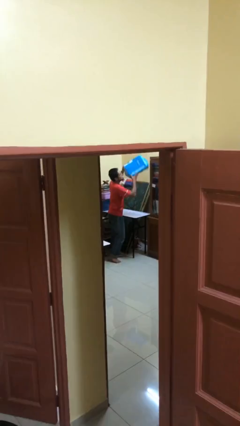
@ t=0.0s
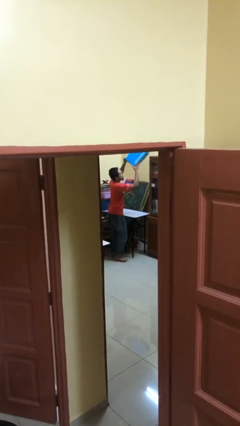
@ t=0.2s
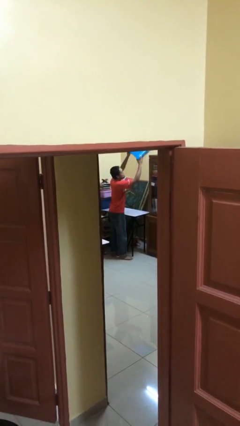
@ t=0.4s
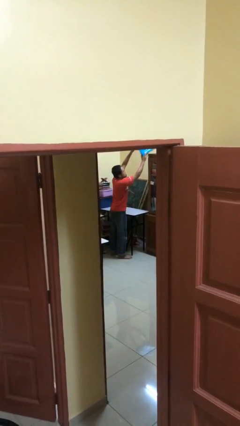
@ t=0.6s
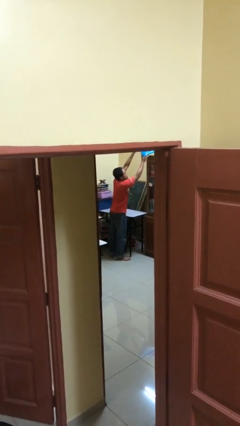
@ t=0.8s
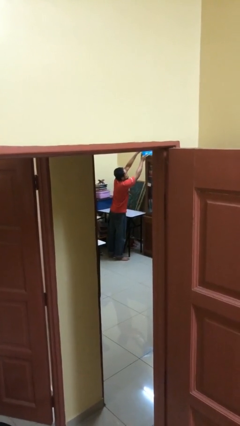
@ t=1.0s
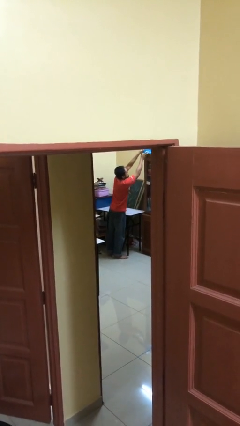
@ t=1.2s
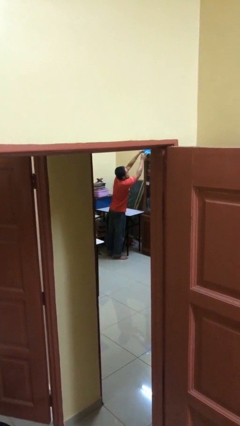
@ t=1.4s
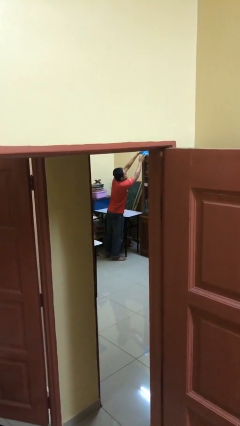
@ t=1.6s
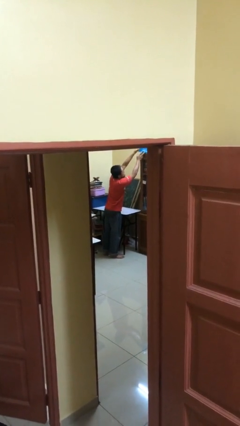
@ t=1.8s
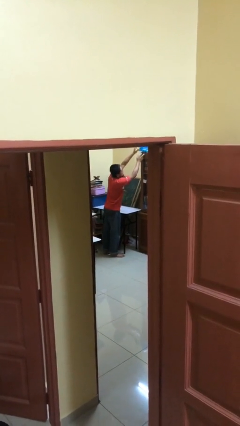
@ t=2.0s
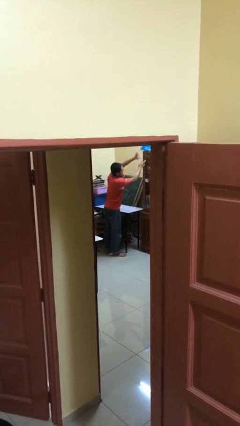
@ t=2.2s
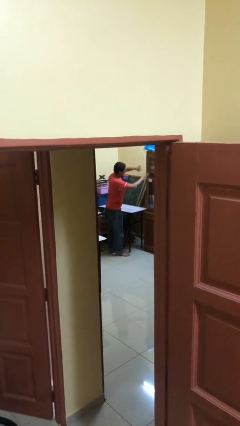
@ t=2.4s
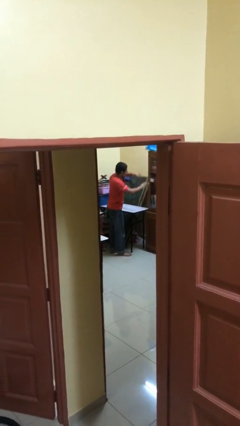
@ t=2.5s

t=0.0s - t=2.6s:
person puts down object on shelf

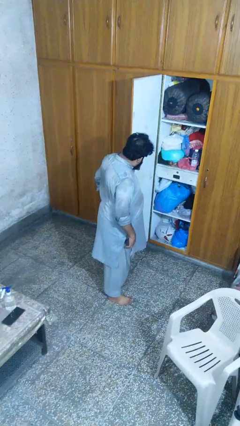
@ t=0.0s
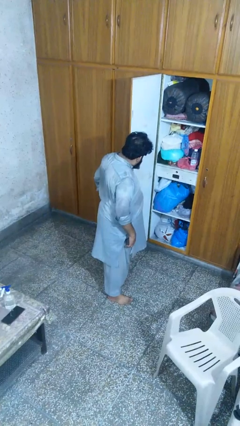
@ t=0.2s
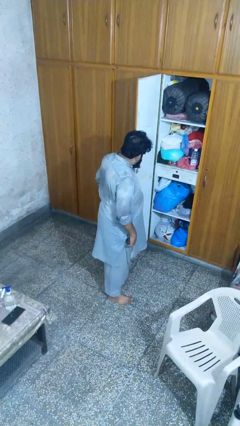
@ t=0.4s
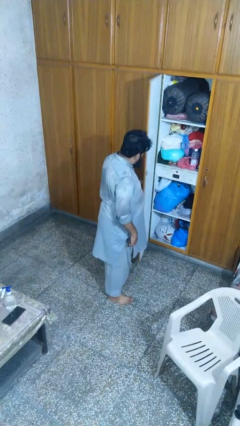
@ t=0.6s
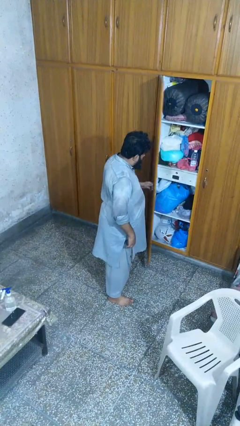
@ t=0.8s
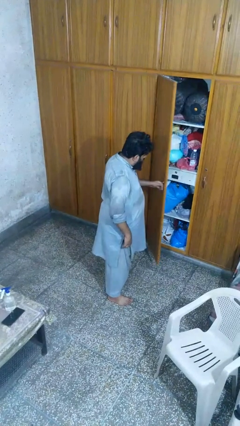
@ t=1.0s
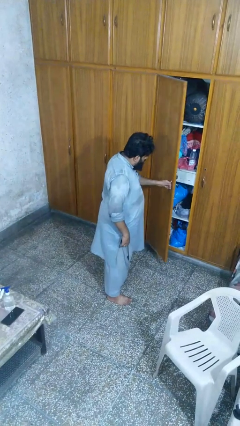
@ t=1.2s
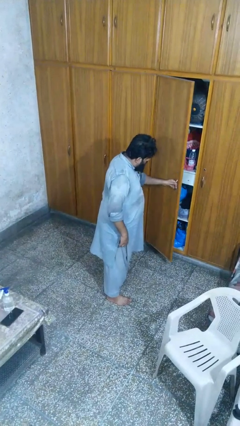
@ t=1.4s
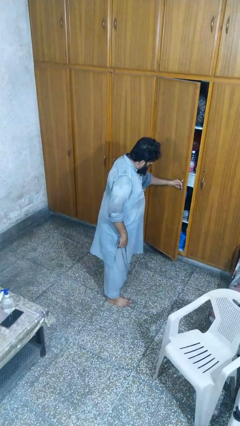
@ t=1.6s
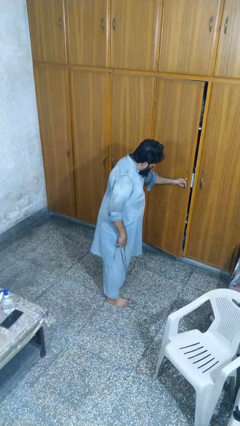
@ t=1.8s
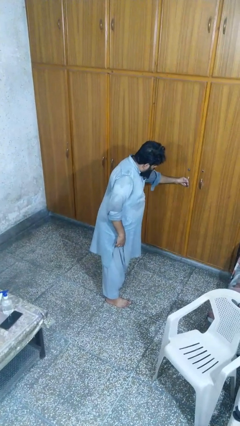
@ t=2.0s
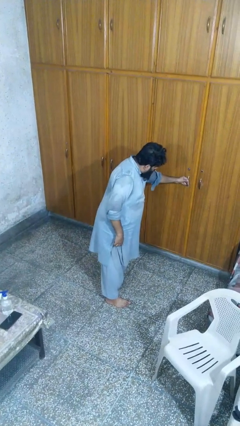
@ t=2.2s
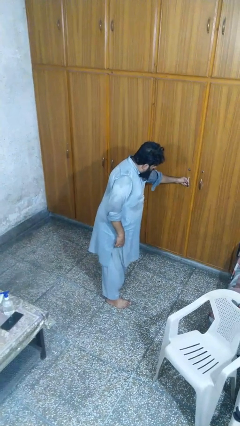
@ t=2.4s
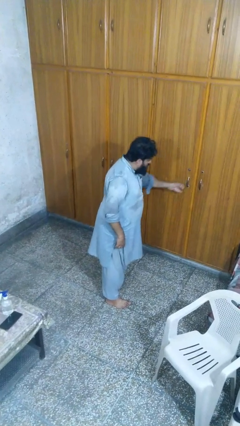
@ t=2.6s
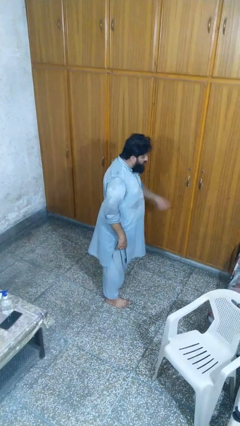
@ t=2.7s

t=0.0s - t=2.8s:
person closes closet door

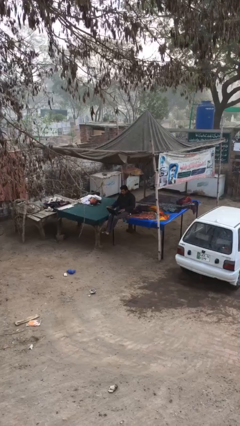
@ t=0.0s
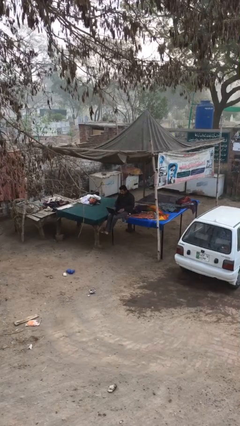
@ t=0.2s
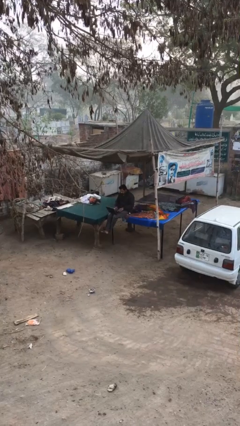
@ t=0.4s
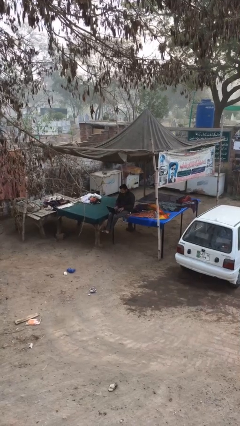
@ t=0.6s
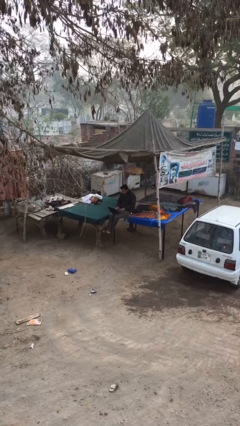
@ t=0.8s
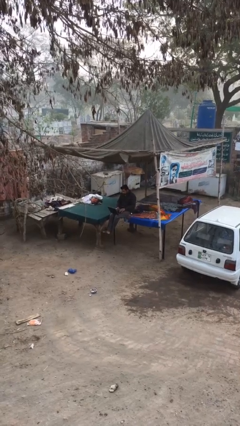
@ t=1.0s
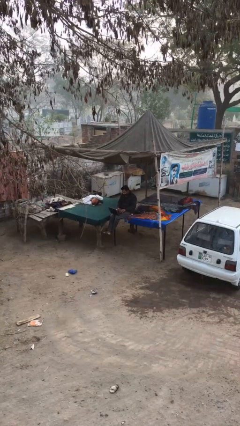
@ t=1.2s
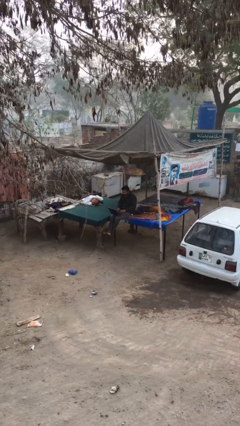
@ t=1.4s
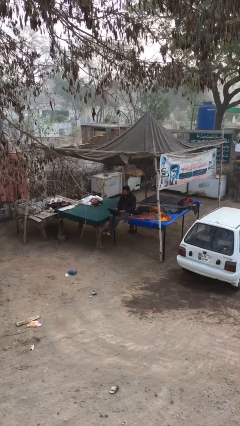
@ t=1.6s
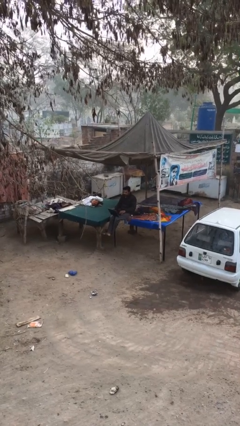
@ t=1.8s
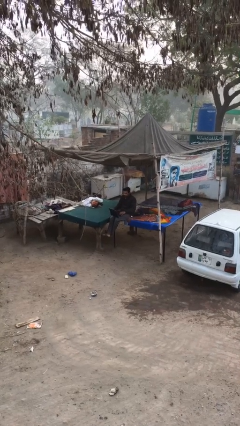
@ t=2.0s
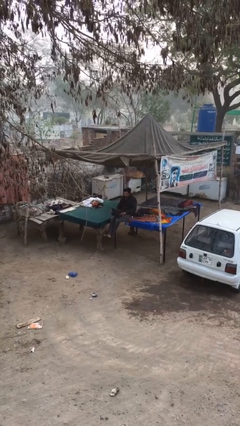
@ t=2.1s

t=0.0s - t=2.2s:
person interacts with laptop

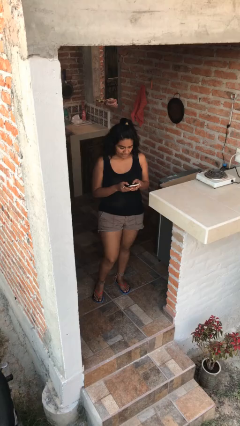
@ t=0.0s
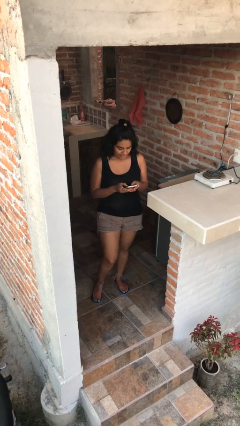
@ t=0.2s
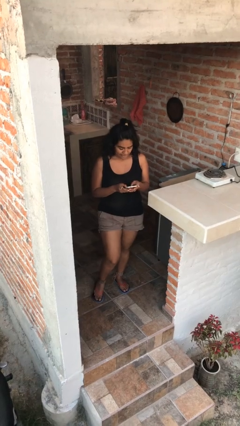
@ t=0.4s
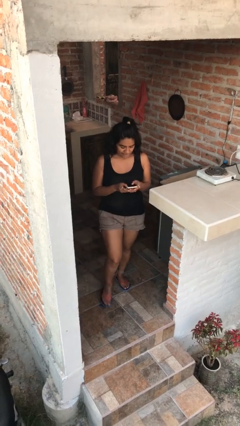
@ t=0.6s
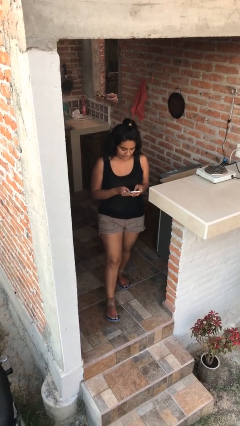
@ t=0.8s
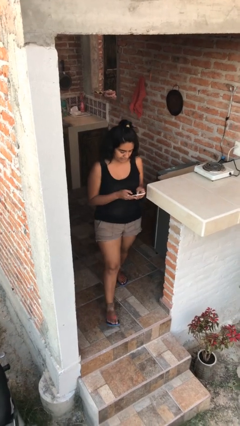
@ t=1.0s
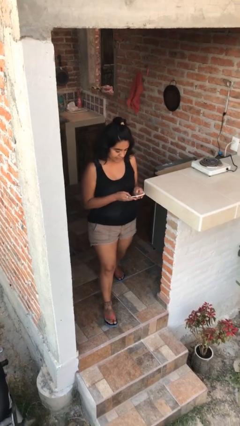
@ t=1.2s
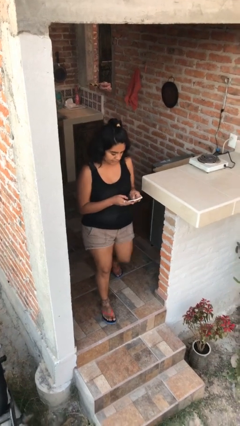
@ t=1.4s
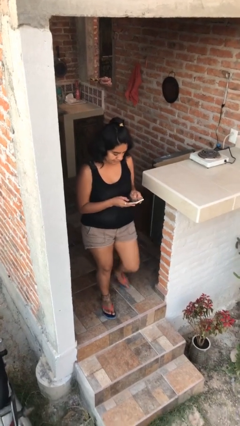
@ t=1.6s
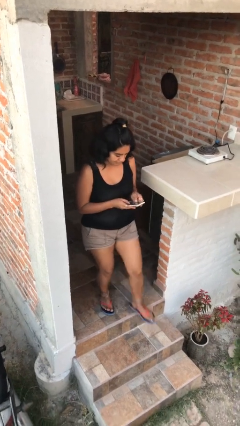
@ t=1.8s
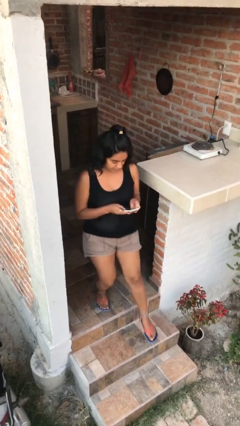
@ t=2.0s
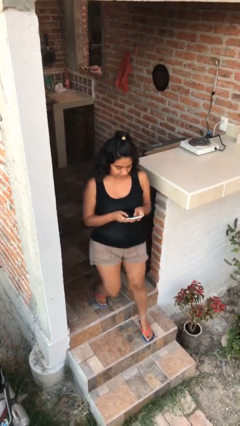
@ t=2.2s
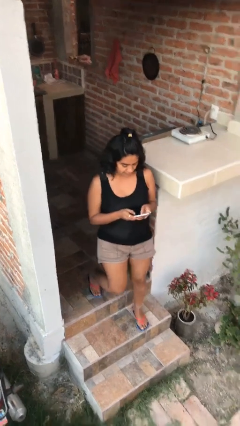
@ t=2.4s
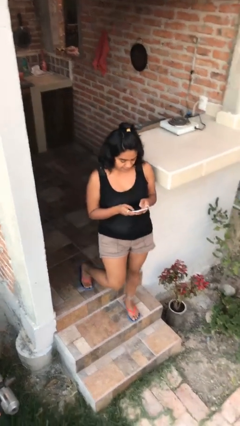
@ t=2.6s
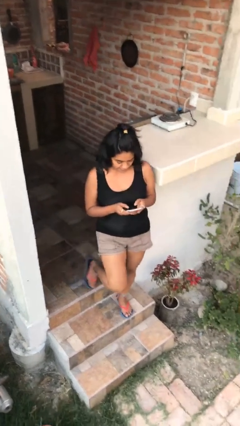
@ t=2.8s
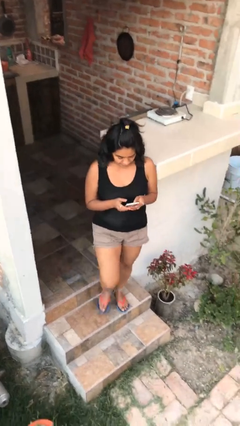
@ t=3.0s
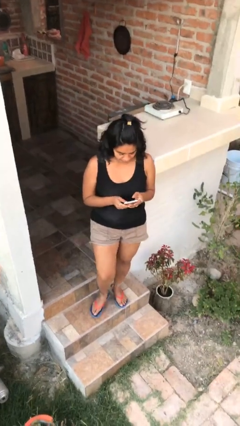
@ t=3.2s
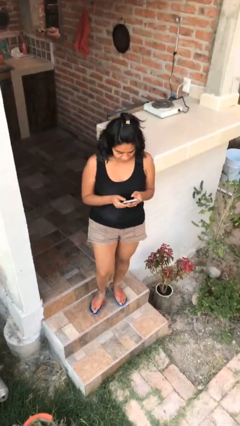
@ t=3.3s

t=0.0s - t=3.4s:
person enters scene through structure

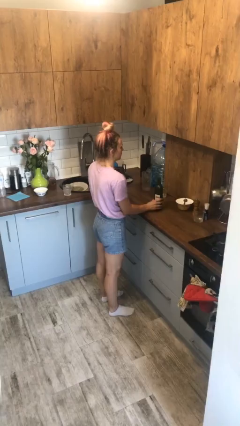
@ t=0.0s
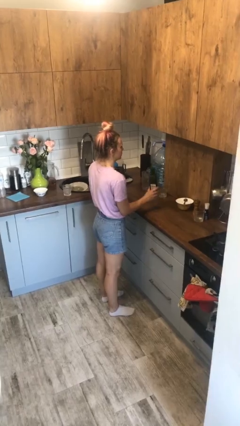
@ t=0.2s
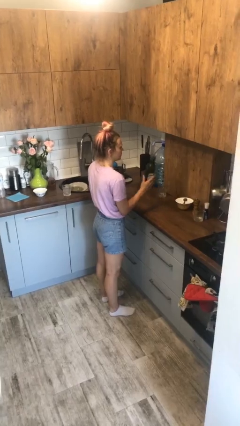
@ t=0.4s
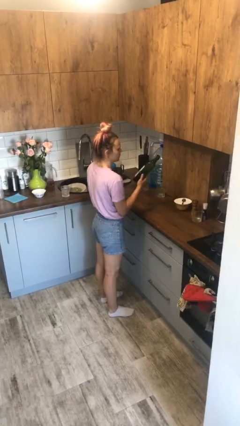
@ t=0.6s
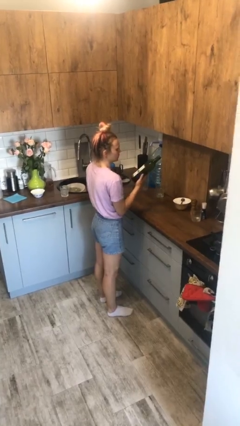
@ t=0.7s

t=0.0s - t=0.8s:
person picks up object from countertop

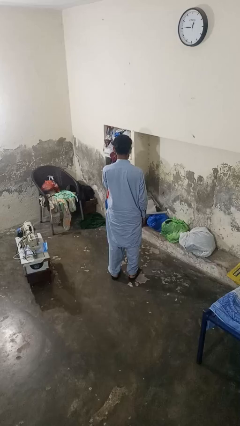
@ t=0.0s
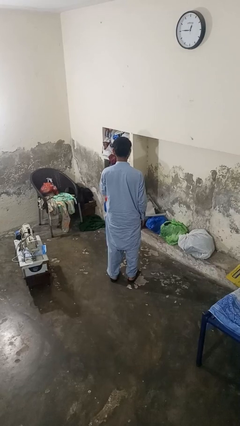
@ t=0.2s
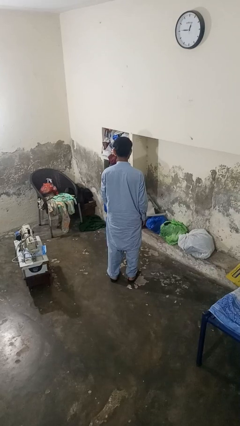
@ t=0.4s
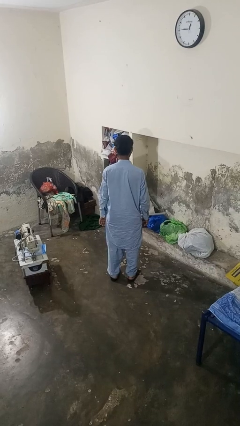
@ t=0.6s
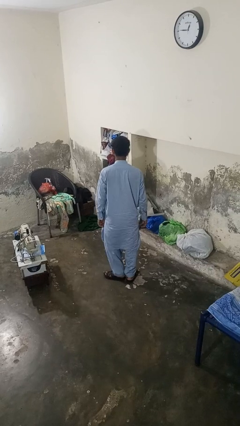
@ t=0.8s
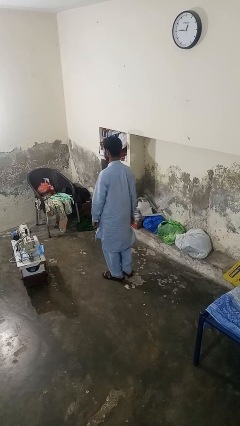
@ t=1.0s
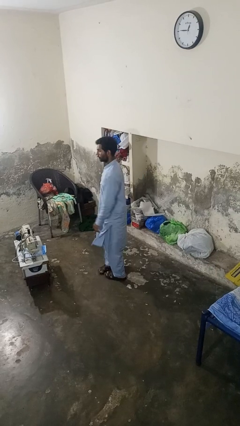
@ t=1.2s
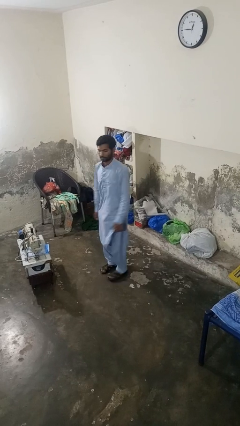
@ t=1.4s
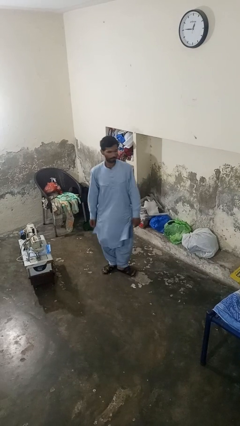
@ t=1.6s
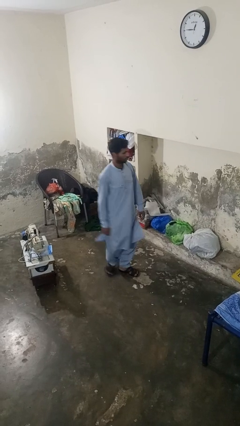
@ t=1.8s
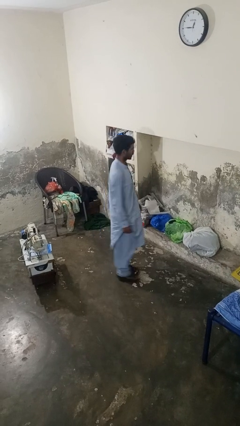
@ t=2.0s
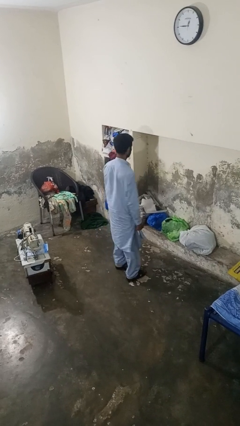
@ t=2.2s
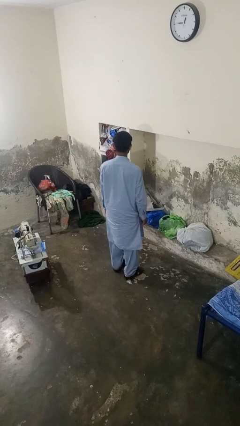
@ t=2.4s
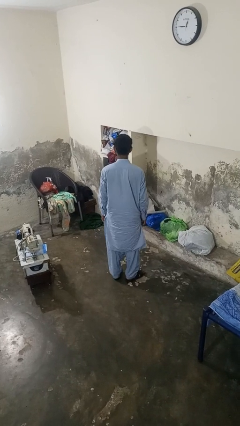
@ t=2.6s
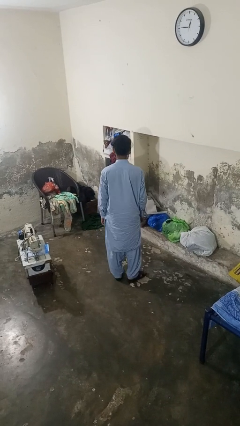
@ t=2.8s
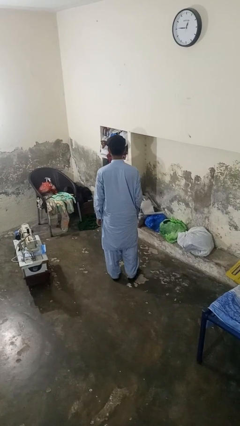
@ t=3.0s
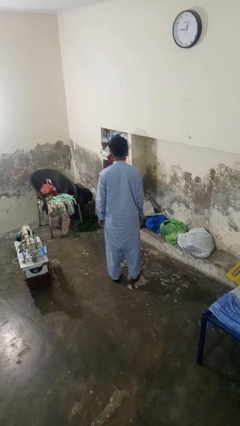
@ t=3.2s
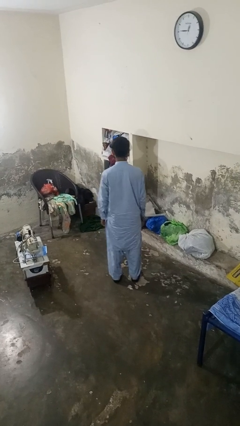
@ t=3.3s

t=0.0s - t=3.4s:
person twirls

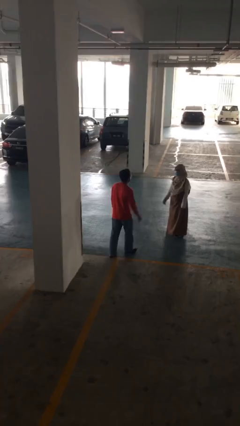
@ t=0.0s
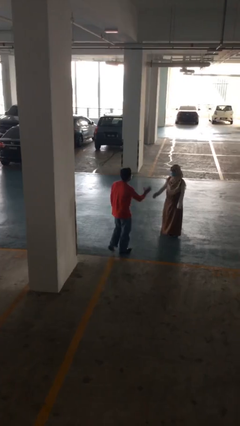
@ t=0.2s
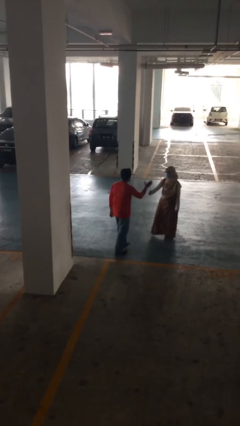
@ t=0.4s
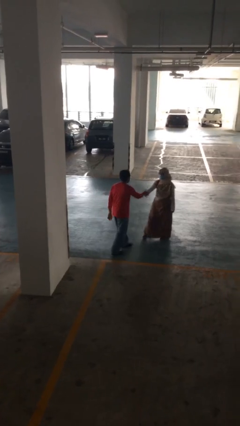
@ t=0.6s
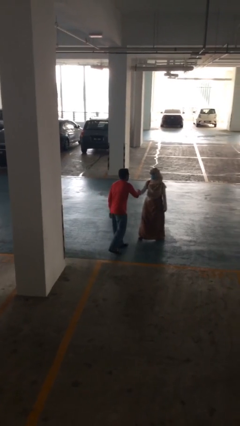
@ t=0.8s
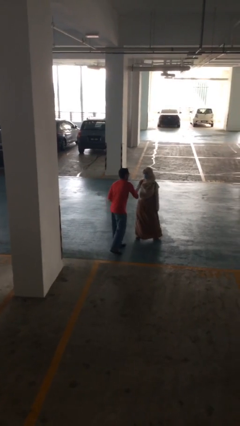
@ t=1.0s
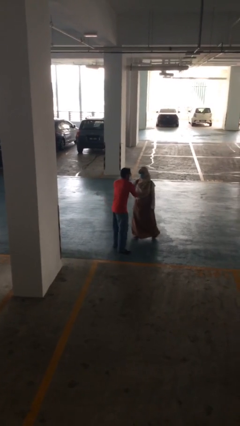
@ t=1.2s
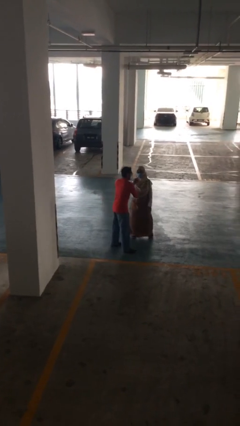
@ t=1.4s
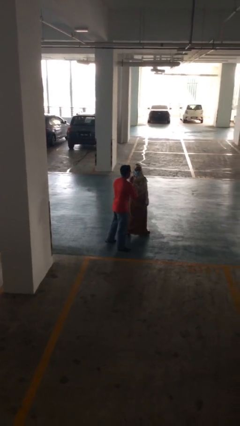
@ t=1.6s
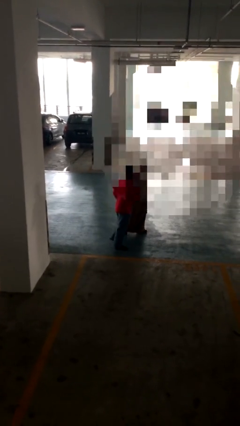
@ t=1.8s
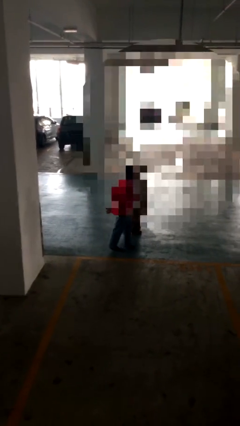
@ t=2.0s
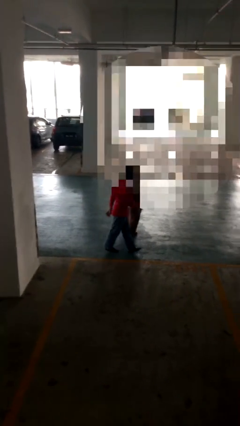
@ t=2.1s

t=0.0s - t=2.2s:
person shakes hand
